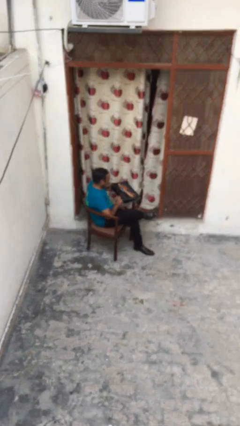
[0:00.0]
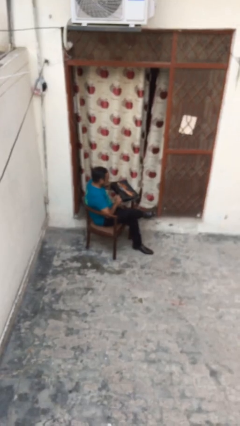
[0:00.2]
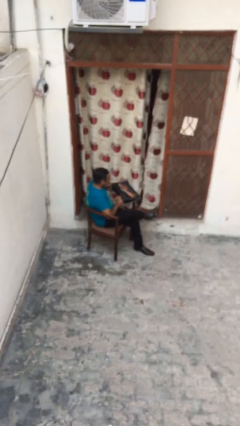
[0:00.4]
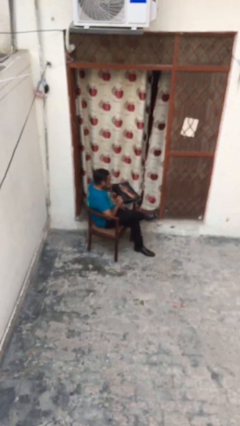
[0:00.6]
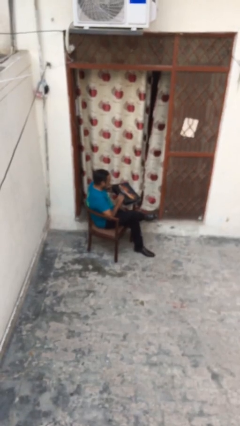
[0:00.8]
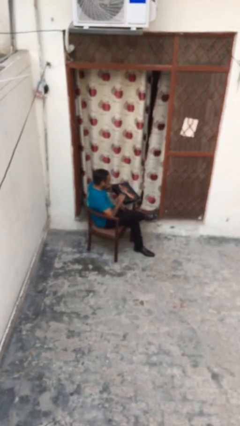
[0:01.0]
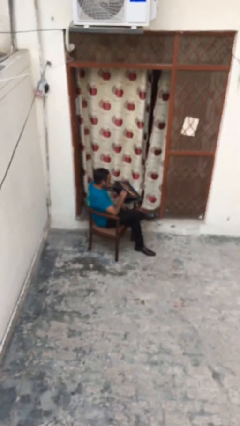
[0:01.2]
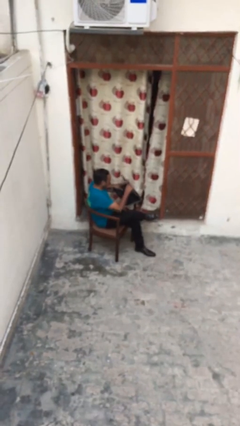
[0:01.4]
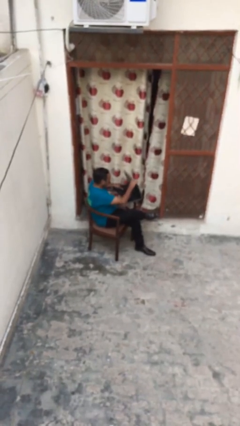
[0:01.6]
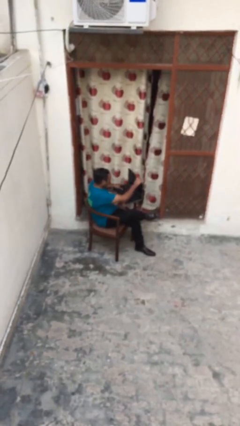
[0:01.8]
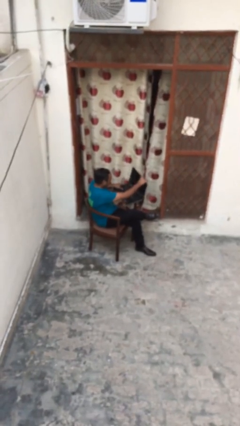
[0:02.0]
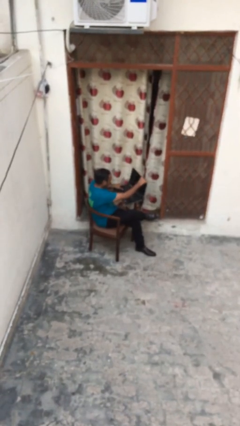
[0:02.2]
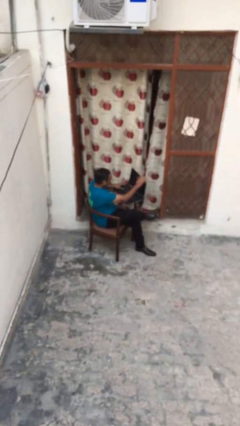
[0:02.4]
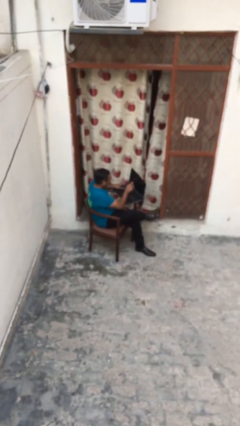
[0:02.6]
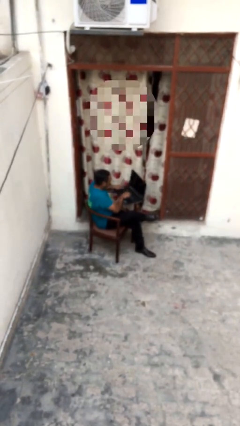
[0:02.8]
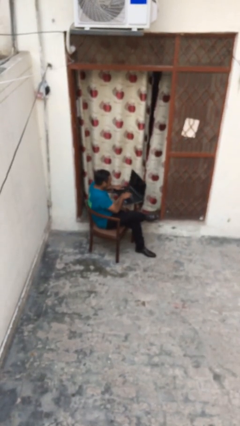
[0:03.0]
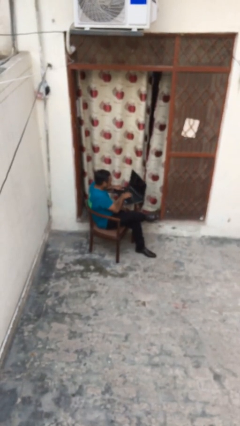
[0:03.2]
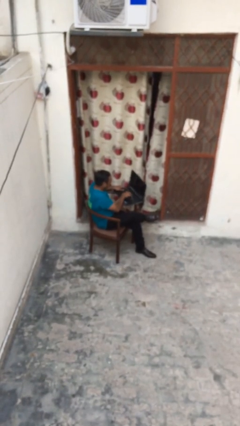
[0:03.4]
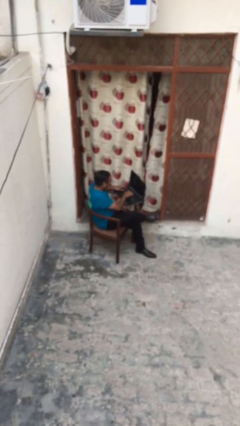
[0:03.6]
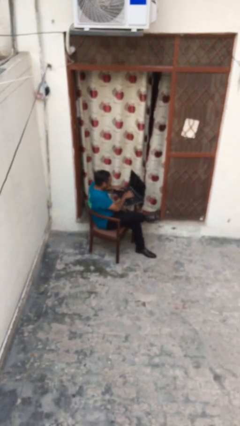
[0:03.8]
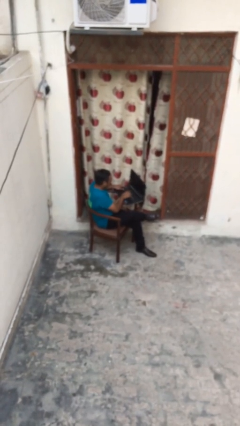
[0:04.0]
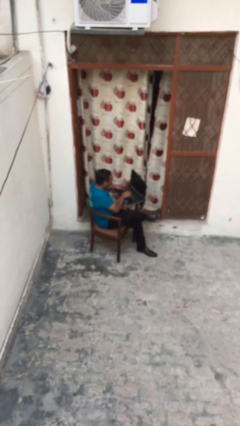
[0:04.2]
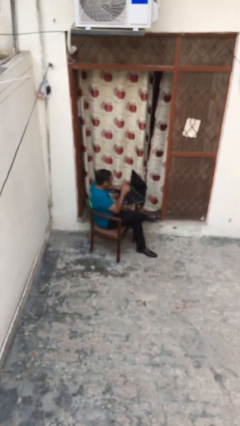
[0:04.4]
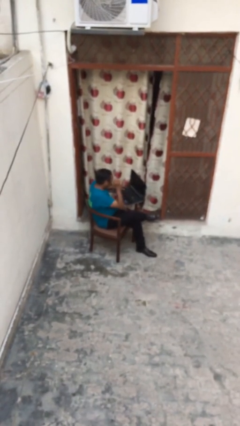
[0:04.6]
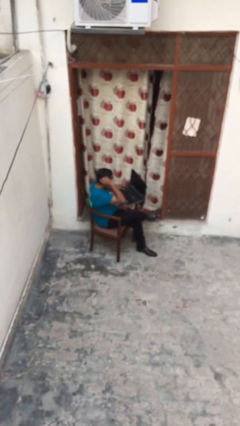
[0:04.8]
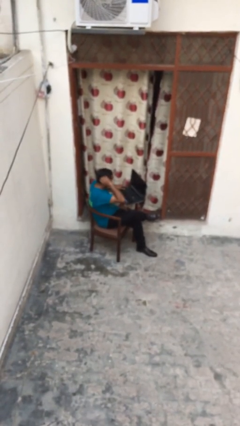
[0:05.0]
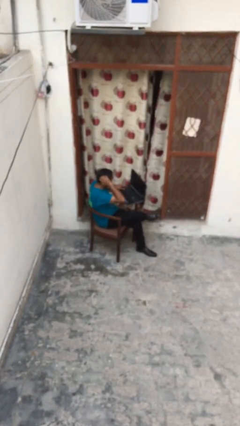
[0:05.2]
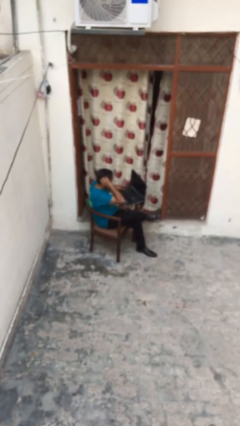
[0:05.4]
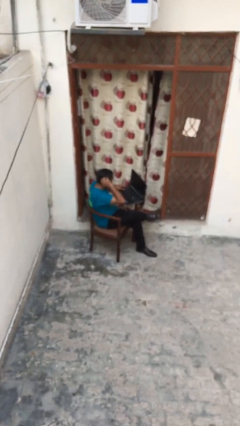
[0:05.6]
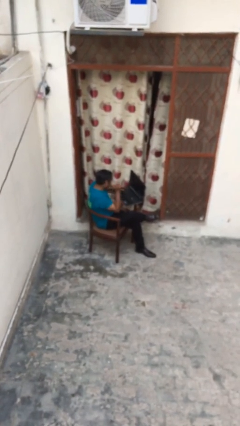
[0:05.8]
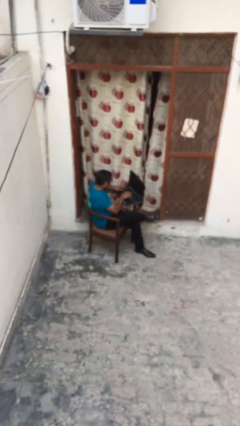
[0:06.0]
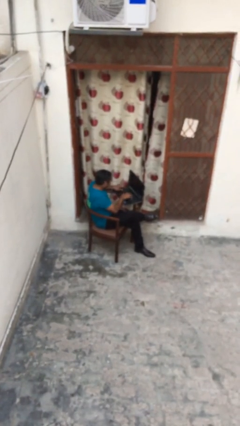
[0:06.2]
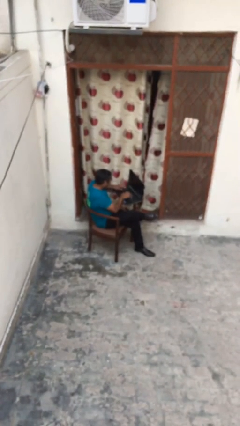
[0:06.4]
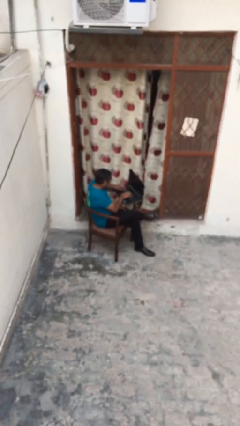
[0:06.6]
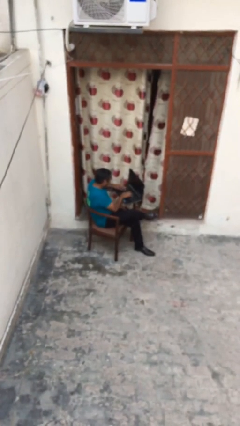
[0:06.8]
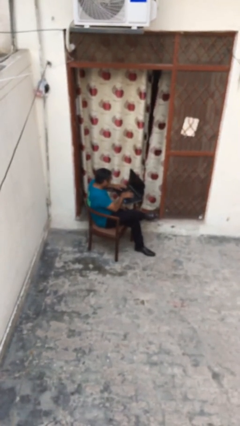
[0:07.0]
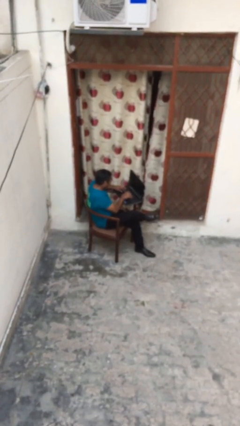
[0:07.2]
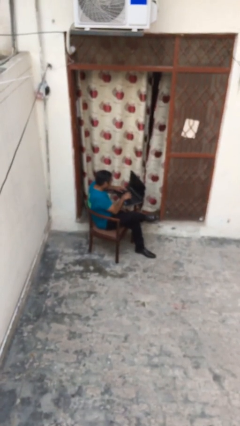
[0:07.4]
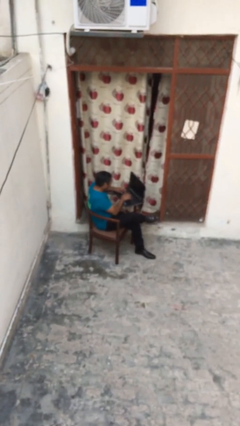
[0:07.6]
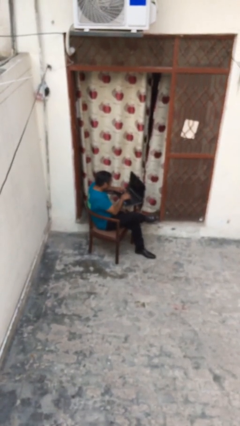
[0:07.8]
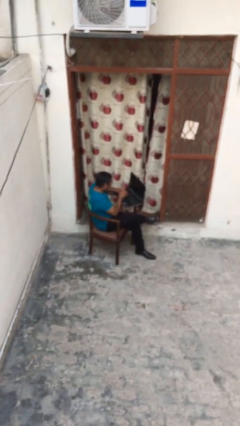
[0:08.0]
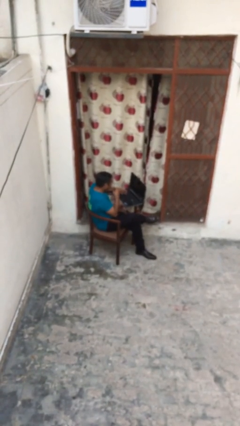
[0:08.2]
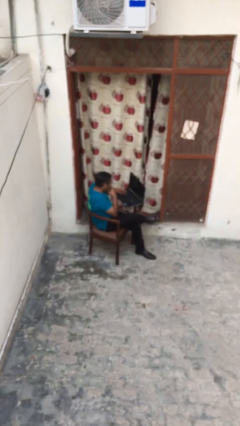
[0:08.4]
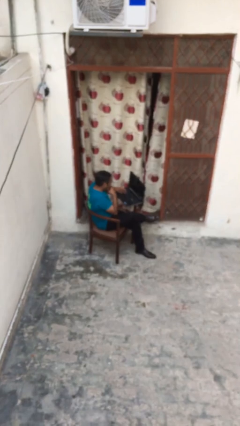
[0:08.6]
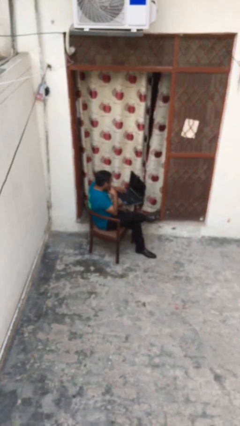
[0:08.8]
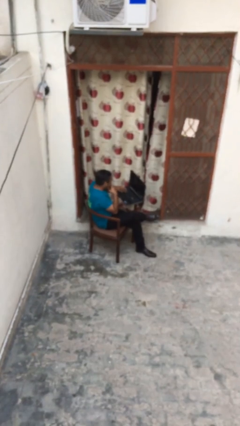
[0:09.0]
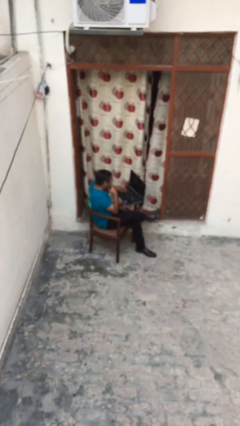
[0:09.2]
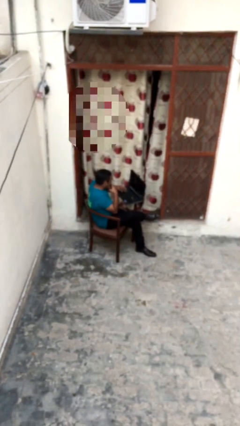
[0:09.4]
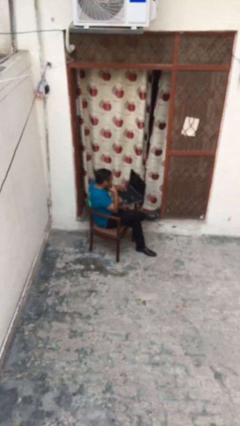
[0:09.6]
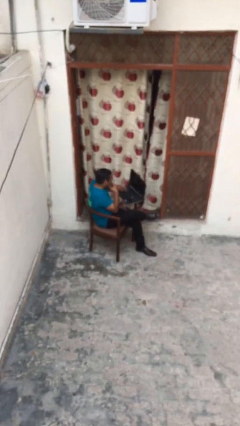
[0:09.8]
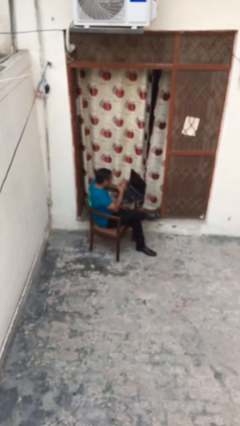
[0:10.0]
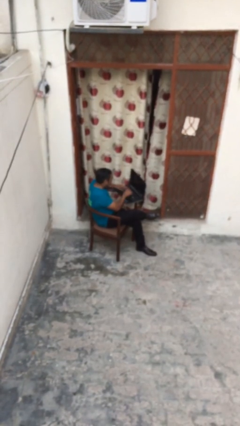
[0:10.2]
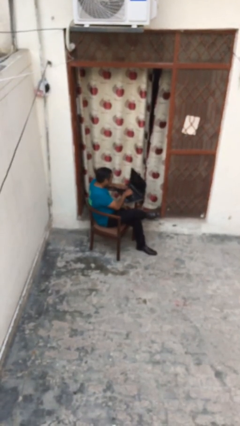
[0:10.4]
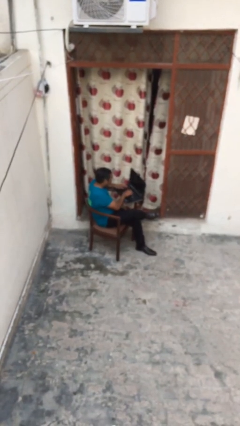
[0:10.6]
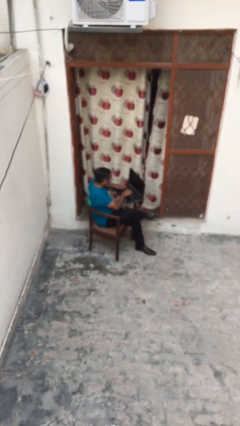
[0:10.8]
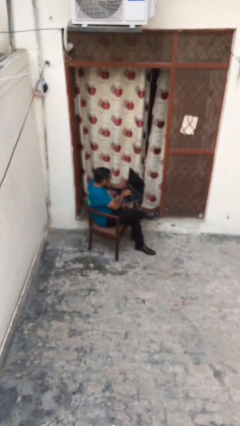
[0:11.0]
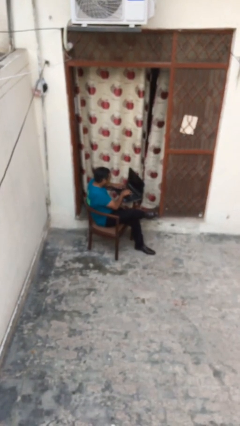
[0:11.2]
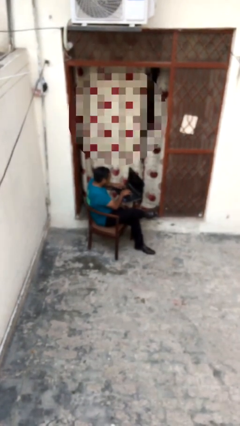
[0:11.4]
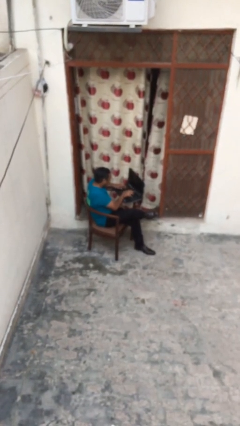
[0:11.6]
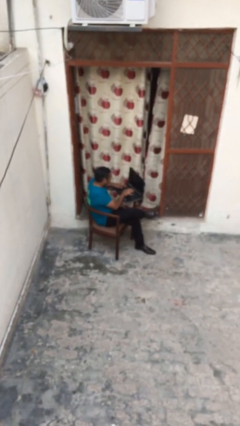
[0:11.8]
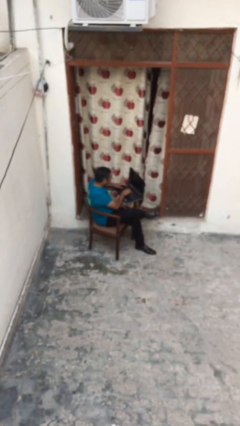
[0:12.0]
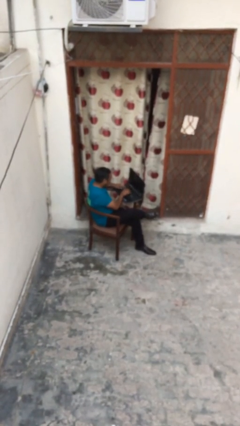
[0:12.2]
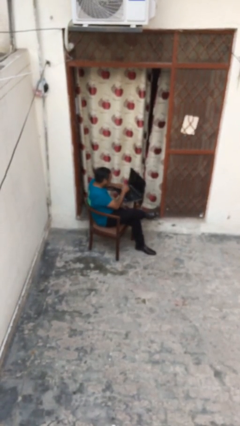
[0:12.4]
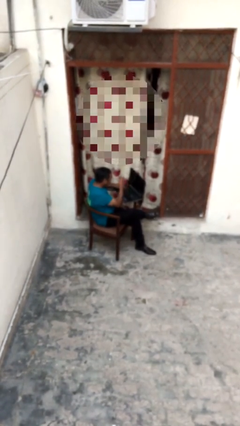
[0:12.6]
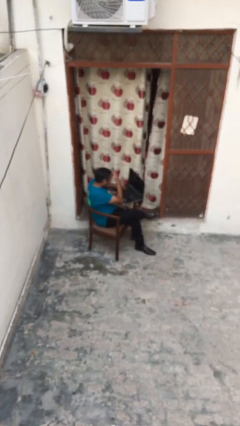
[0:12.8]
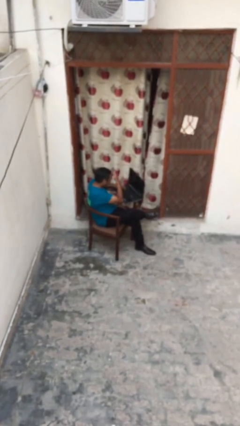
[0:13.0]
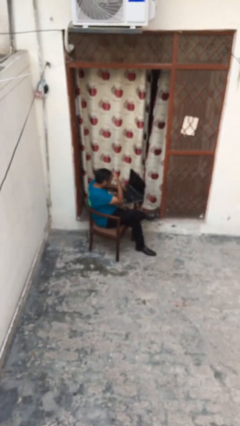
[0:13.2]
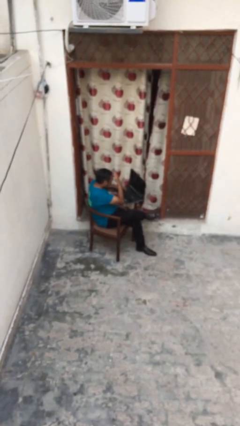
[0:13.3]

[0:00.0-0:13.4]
person interacts with laptop

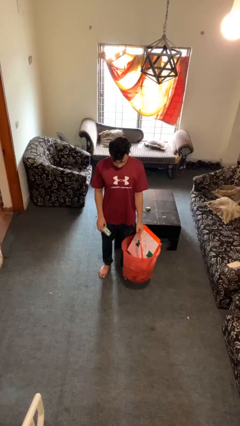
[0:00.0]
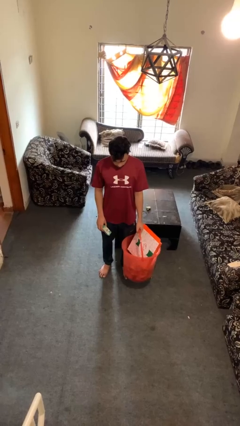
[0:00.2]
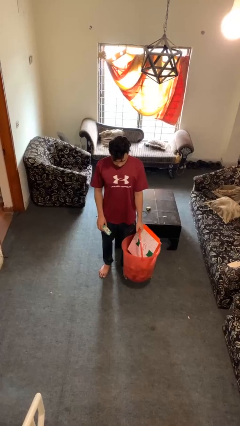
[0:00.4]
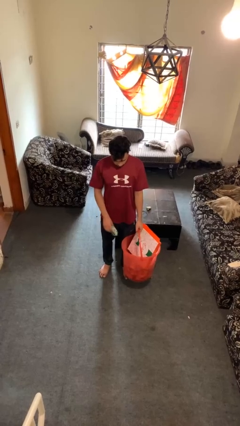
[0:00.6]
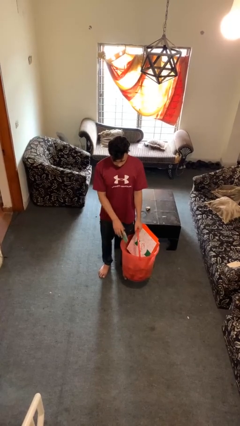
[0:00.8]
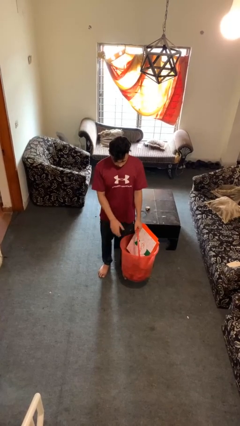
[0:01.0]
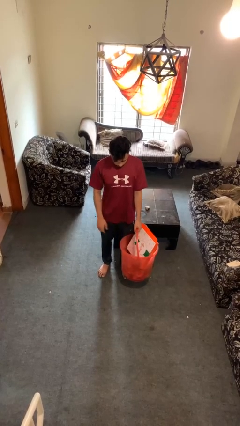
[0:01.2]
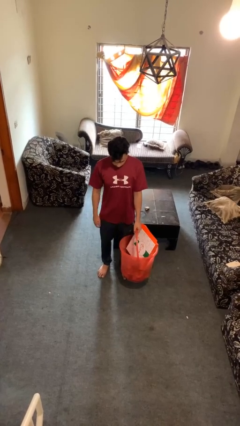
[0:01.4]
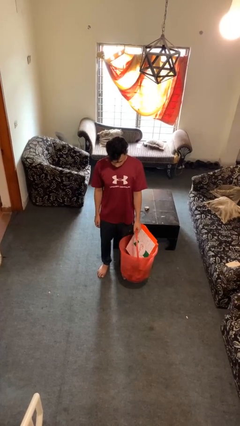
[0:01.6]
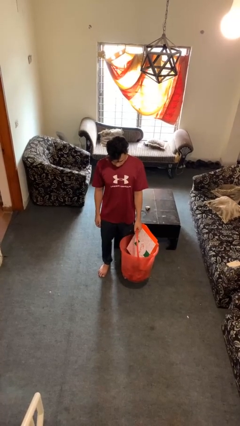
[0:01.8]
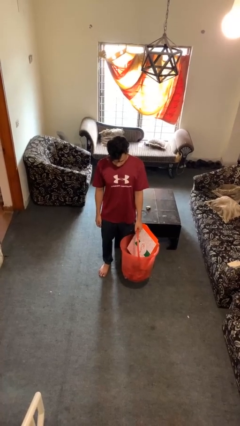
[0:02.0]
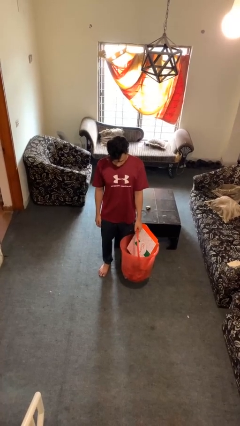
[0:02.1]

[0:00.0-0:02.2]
person puts object into basket

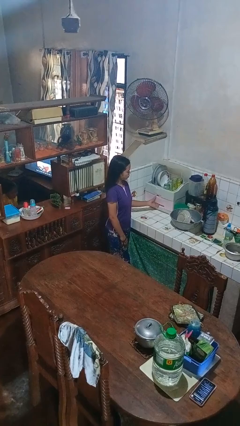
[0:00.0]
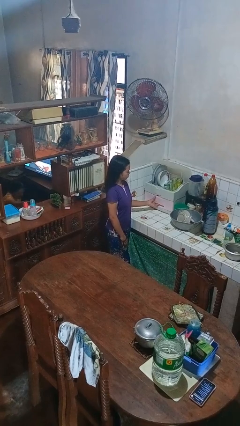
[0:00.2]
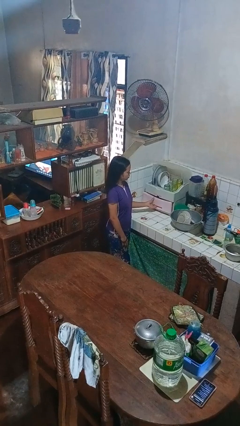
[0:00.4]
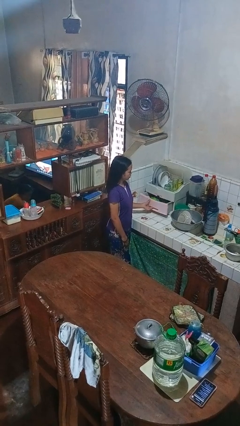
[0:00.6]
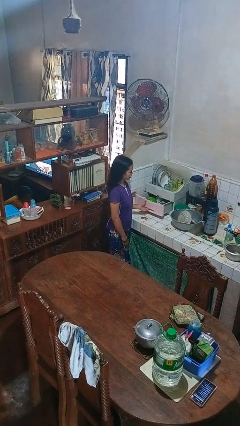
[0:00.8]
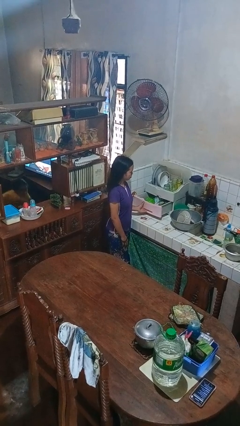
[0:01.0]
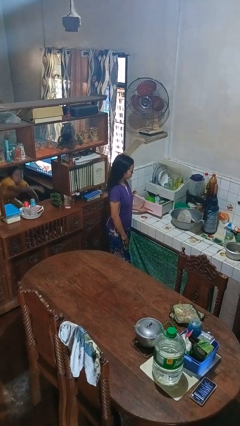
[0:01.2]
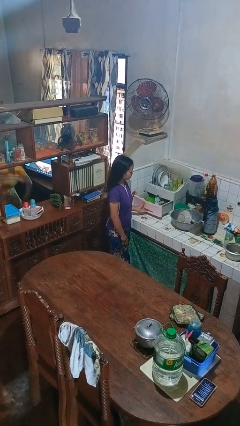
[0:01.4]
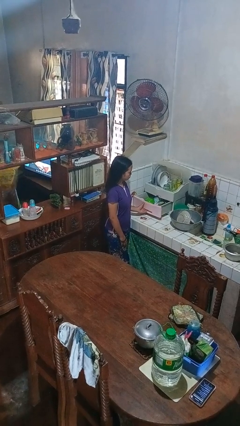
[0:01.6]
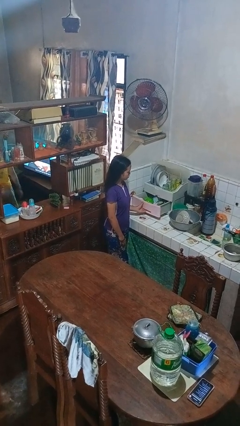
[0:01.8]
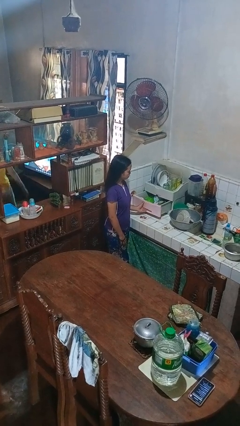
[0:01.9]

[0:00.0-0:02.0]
person opens kitchen drawer

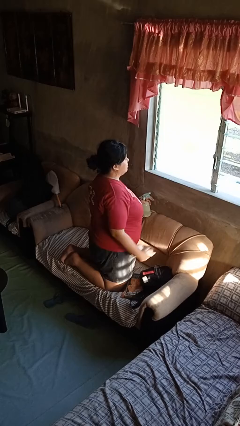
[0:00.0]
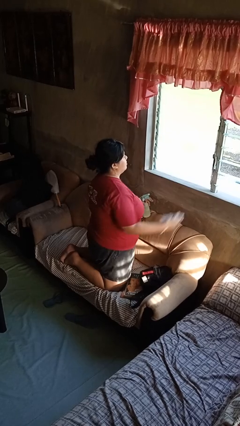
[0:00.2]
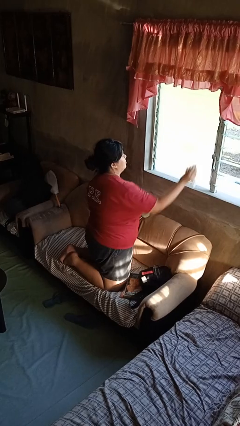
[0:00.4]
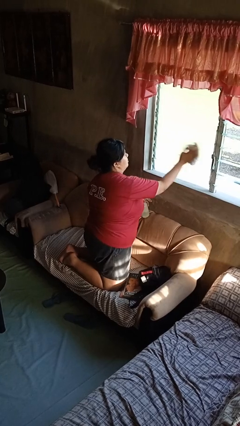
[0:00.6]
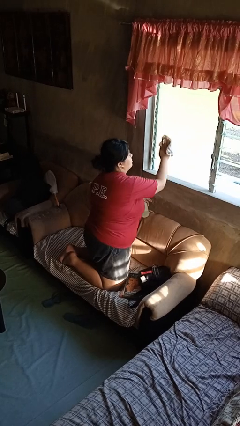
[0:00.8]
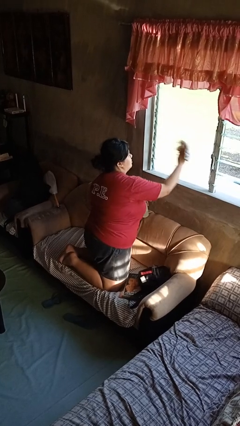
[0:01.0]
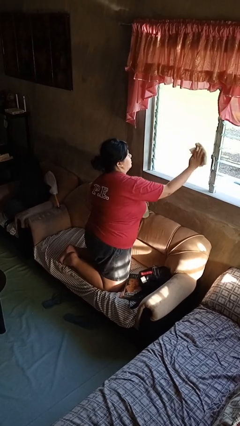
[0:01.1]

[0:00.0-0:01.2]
person washes window
